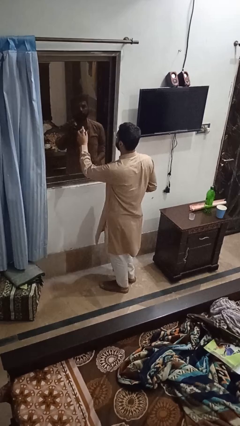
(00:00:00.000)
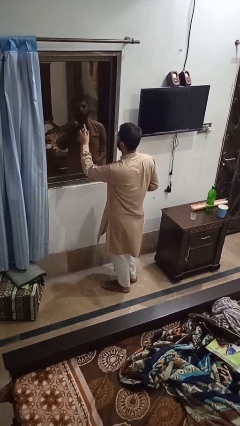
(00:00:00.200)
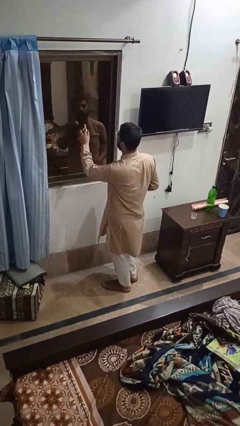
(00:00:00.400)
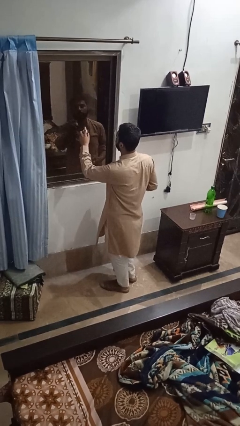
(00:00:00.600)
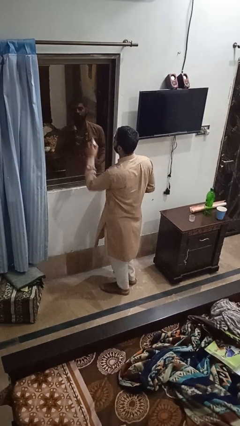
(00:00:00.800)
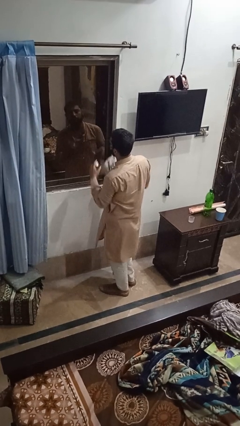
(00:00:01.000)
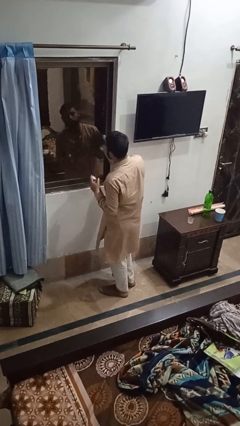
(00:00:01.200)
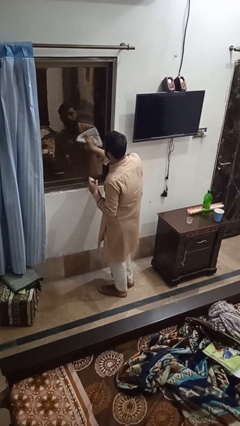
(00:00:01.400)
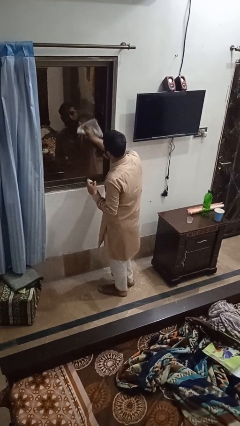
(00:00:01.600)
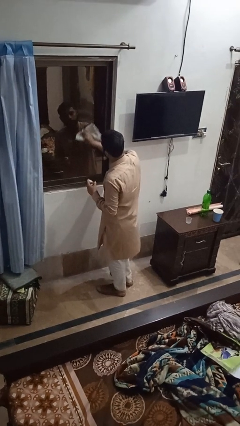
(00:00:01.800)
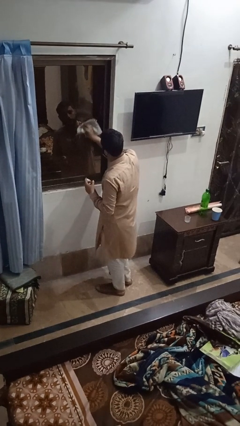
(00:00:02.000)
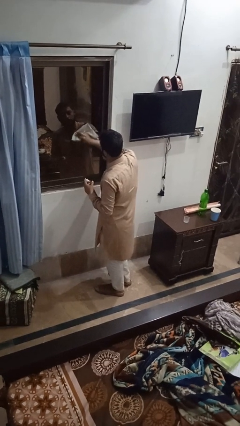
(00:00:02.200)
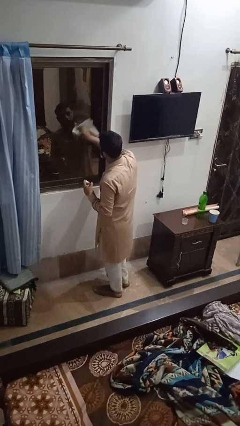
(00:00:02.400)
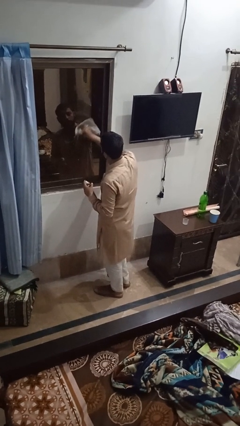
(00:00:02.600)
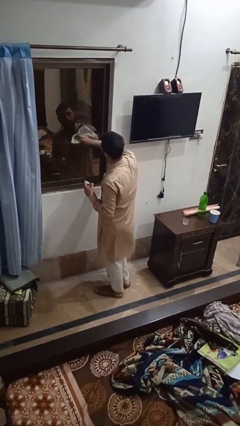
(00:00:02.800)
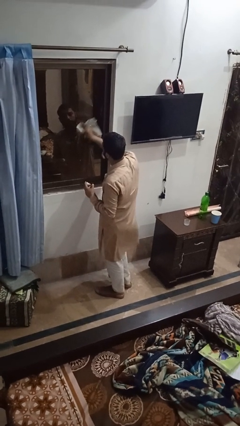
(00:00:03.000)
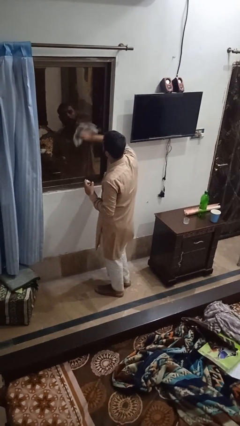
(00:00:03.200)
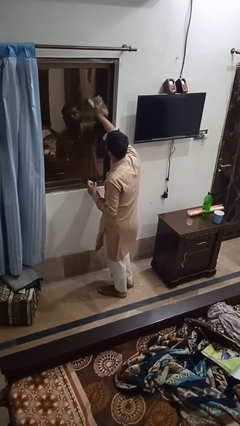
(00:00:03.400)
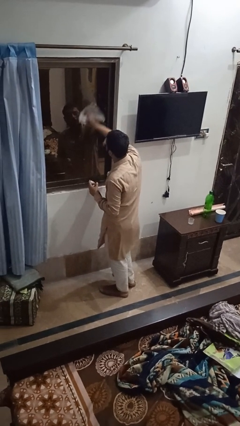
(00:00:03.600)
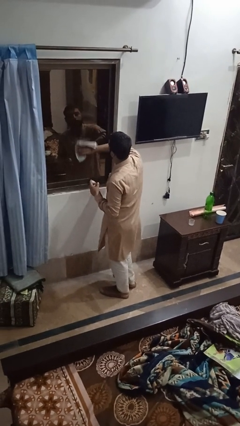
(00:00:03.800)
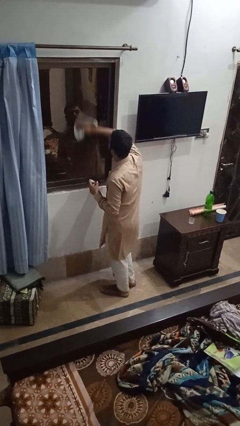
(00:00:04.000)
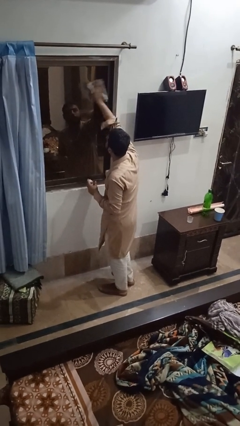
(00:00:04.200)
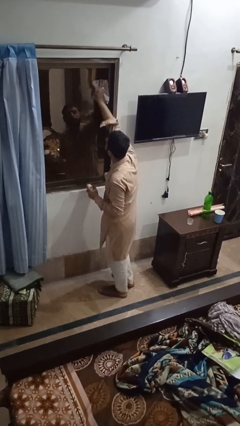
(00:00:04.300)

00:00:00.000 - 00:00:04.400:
person sprays from bottle

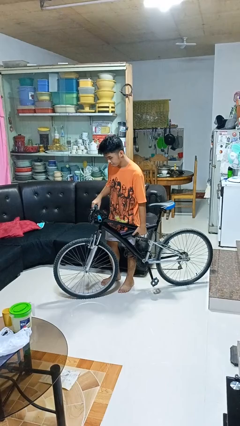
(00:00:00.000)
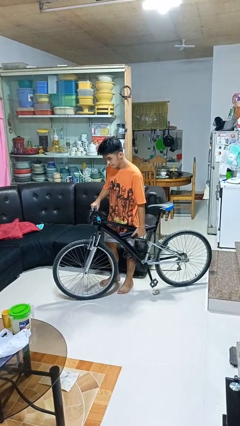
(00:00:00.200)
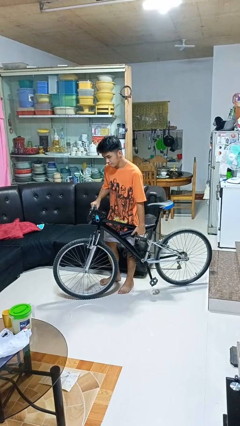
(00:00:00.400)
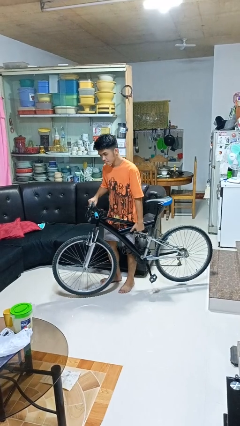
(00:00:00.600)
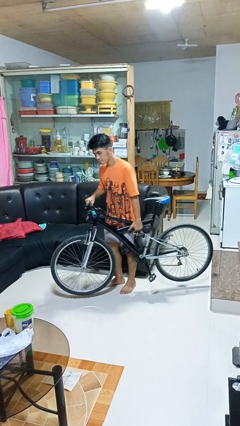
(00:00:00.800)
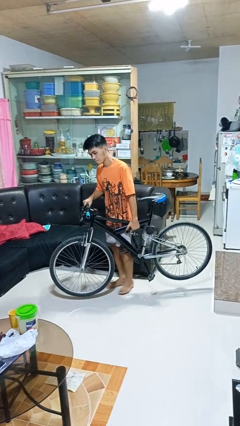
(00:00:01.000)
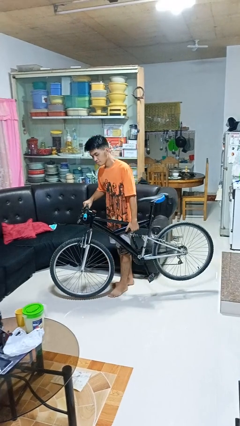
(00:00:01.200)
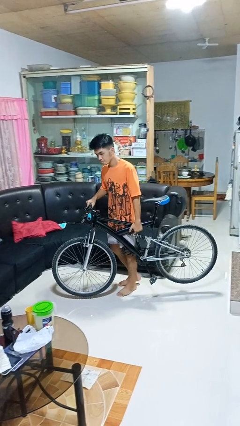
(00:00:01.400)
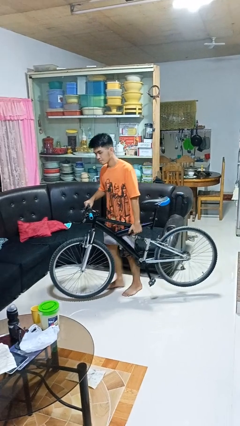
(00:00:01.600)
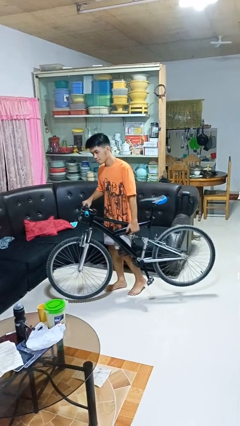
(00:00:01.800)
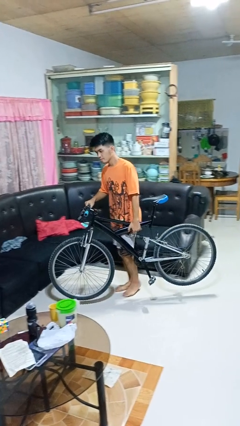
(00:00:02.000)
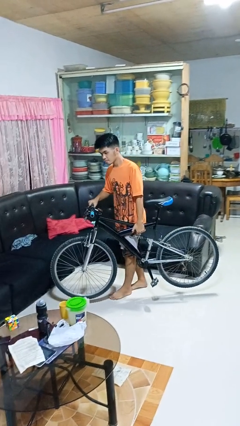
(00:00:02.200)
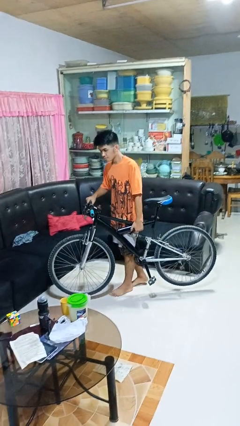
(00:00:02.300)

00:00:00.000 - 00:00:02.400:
person carries bicycle

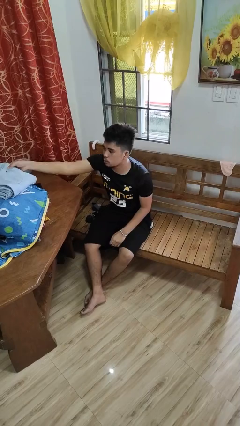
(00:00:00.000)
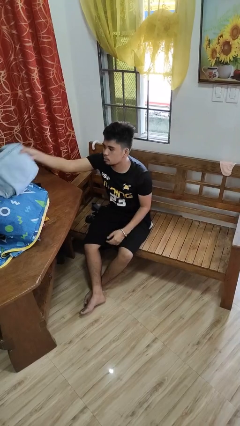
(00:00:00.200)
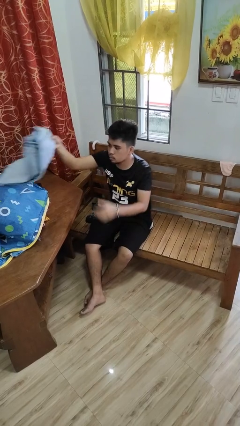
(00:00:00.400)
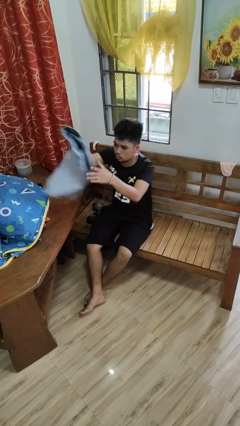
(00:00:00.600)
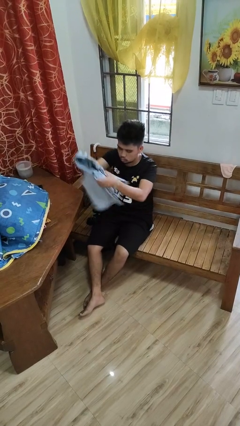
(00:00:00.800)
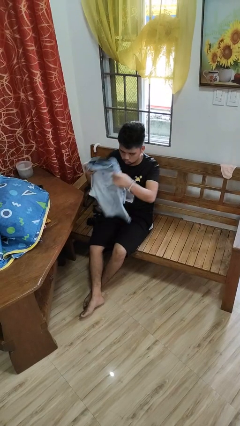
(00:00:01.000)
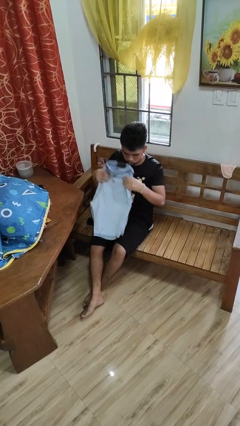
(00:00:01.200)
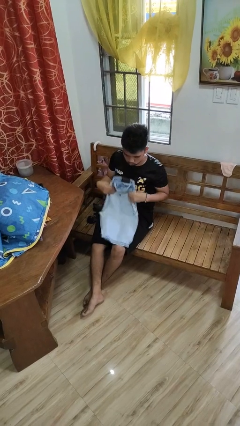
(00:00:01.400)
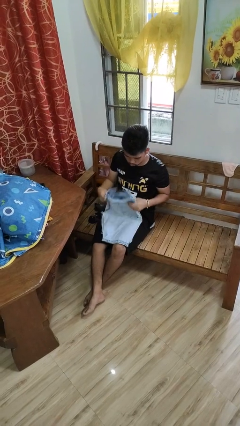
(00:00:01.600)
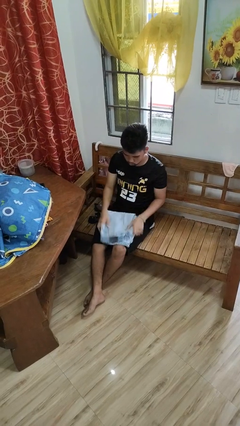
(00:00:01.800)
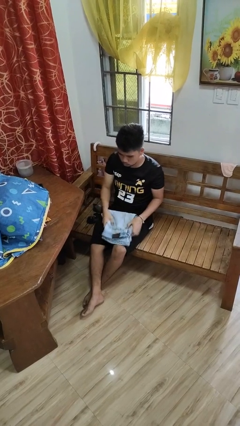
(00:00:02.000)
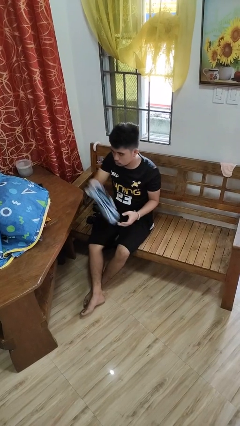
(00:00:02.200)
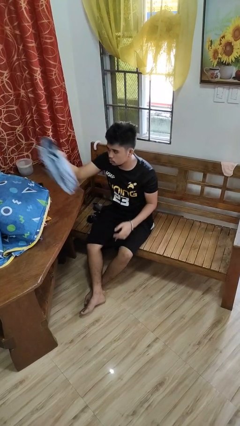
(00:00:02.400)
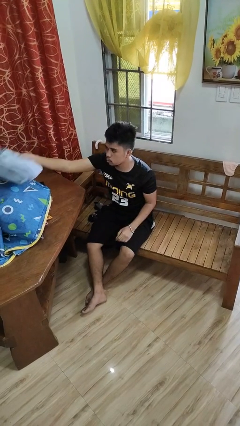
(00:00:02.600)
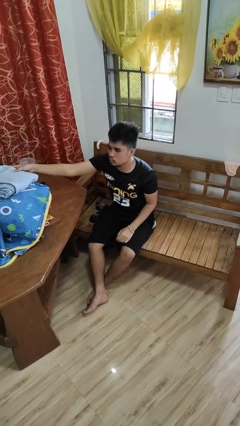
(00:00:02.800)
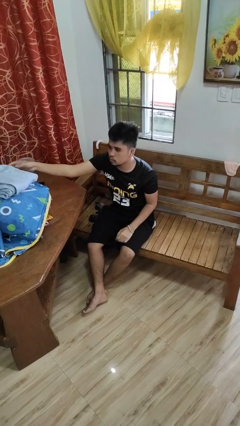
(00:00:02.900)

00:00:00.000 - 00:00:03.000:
person folds pants

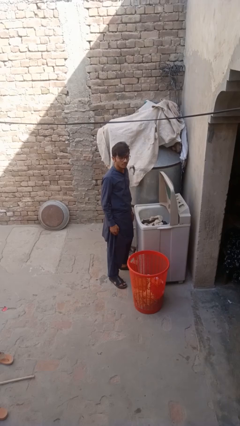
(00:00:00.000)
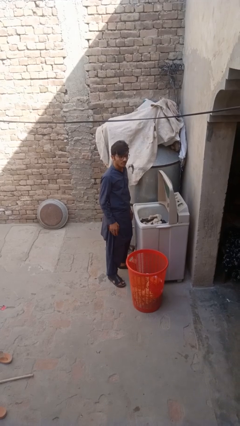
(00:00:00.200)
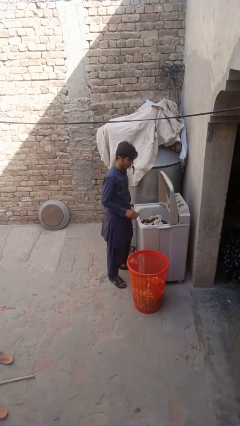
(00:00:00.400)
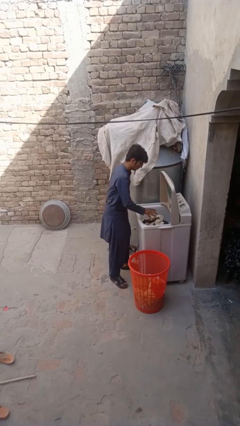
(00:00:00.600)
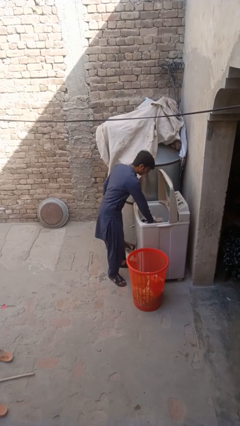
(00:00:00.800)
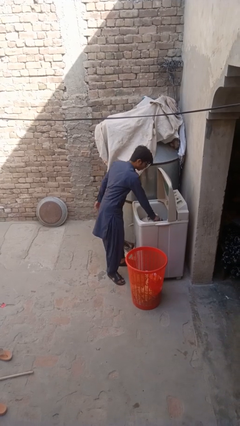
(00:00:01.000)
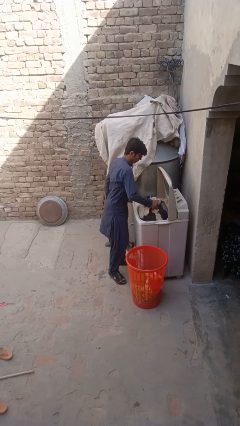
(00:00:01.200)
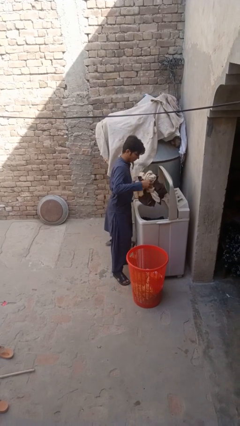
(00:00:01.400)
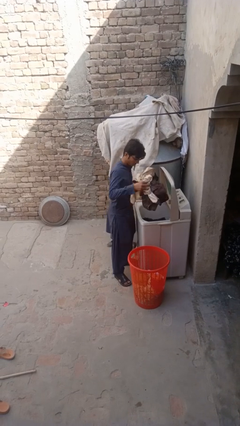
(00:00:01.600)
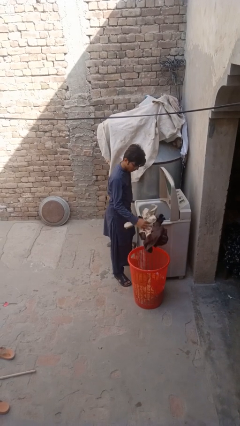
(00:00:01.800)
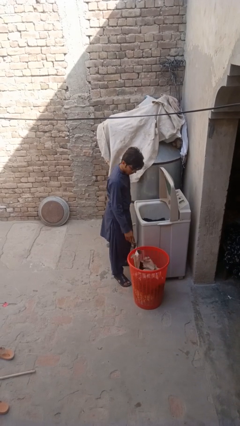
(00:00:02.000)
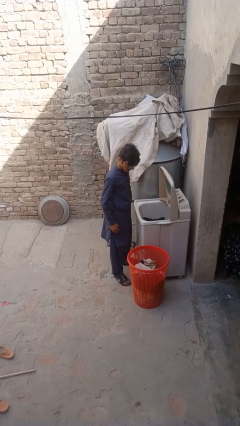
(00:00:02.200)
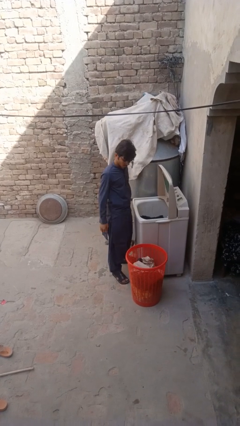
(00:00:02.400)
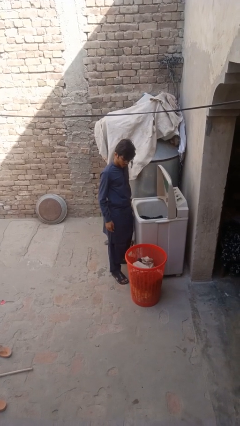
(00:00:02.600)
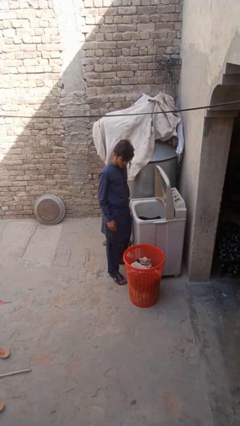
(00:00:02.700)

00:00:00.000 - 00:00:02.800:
person unloads clotheswasher

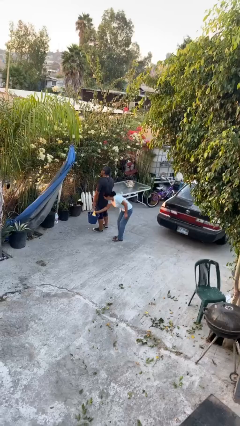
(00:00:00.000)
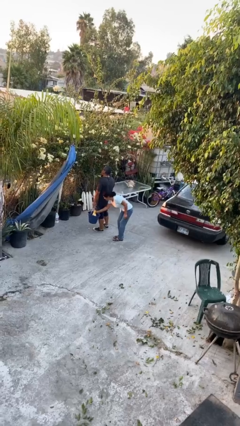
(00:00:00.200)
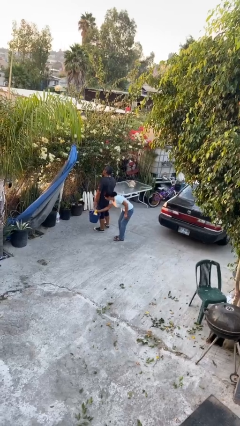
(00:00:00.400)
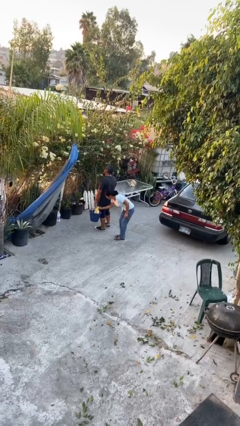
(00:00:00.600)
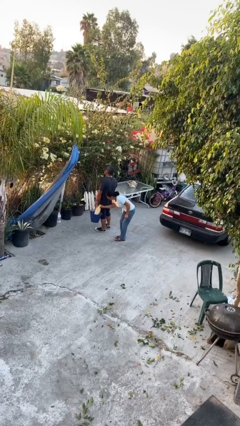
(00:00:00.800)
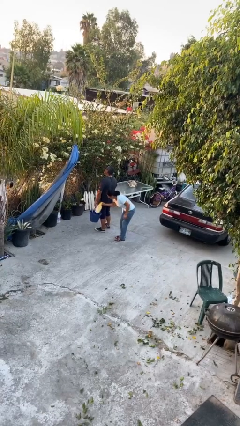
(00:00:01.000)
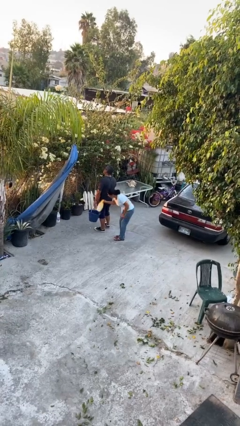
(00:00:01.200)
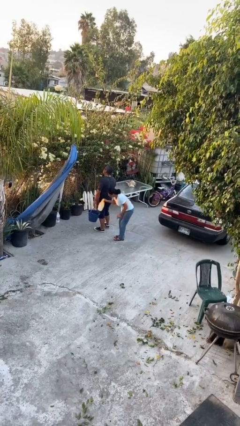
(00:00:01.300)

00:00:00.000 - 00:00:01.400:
person steals object from person

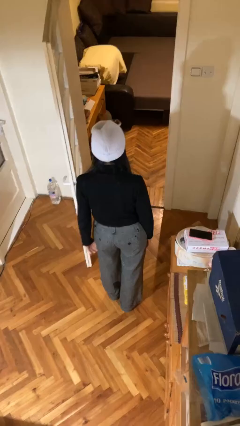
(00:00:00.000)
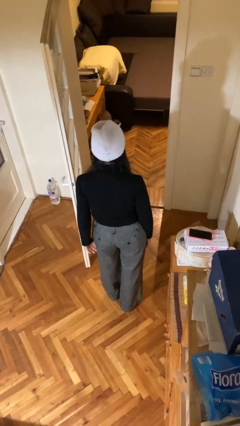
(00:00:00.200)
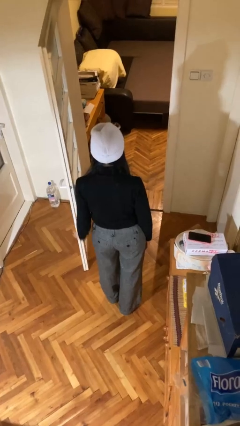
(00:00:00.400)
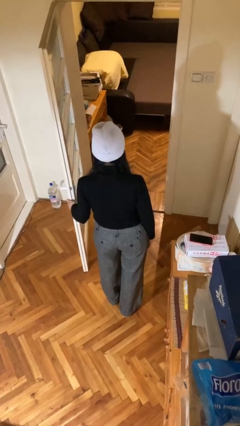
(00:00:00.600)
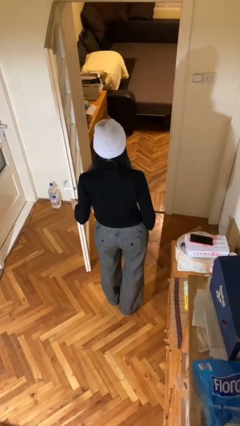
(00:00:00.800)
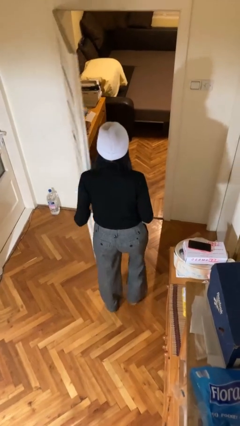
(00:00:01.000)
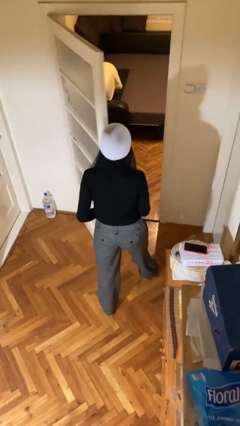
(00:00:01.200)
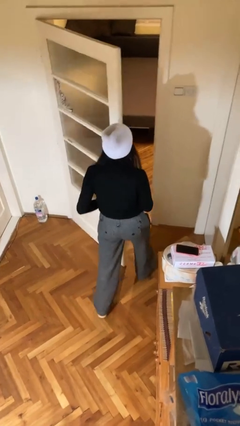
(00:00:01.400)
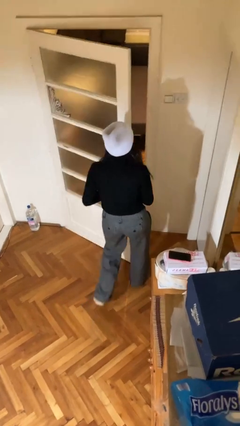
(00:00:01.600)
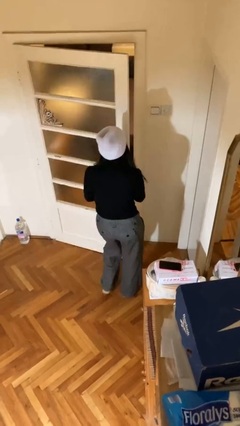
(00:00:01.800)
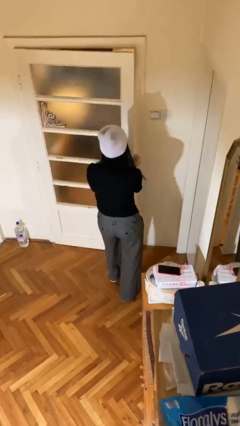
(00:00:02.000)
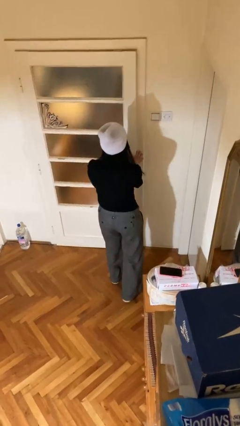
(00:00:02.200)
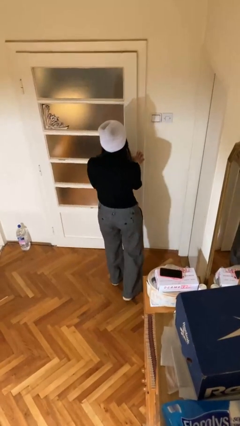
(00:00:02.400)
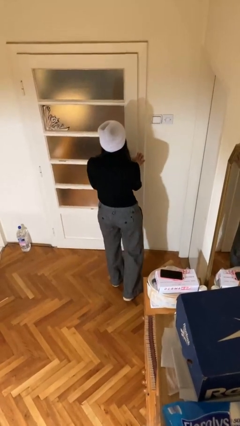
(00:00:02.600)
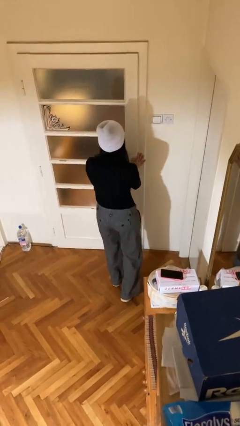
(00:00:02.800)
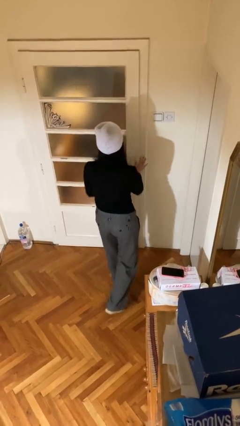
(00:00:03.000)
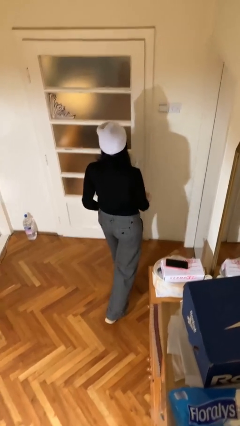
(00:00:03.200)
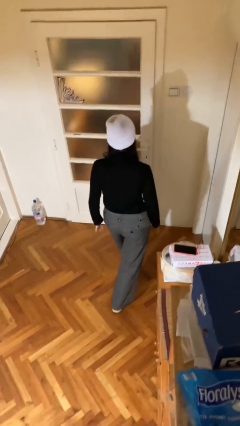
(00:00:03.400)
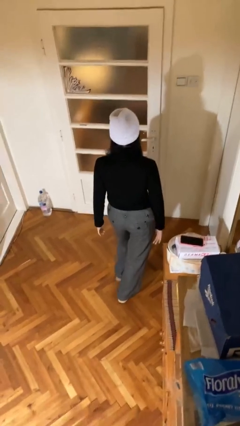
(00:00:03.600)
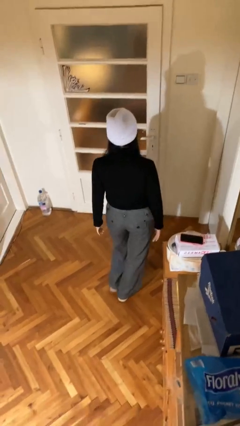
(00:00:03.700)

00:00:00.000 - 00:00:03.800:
person closes facility door
